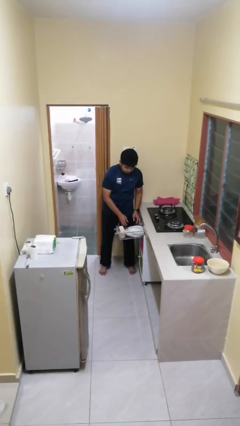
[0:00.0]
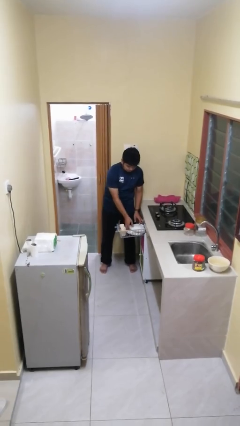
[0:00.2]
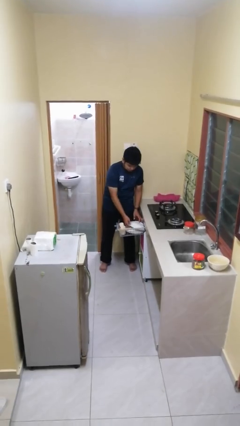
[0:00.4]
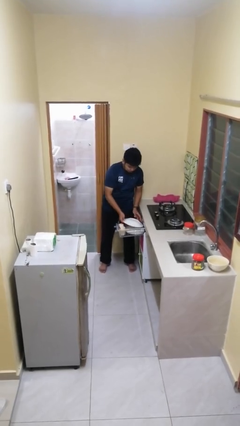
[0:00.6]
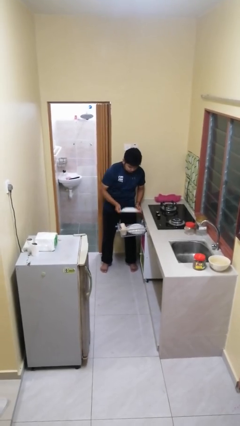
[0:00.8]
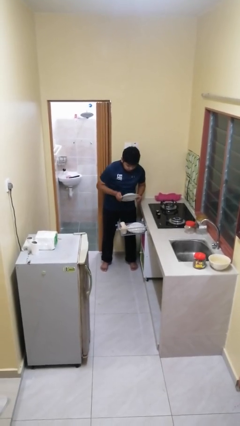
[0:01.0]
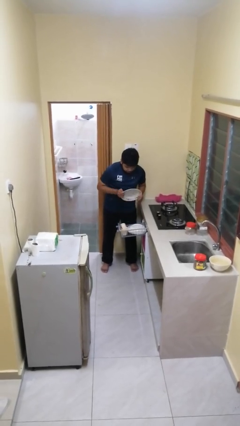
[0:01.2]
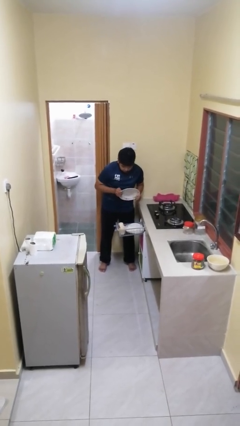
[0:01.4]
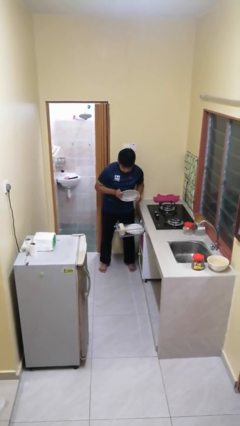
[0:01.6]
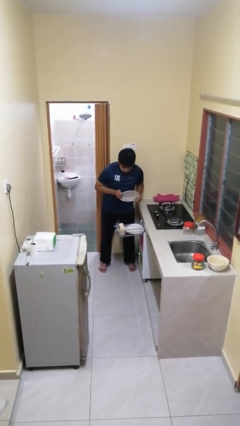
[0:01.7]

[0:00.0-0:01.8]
person takes object from kitchen drawer

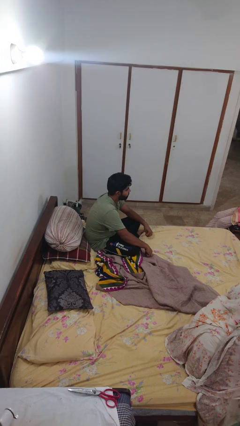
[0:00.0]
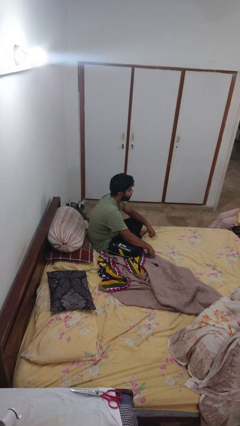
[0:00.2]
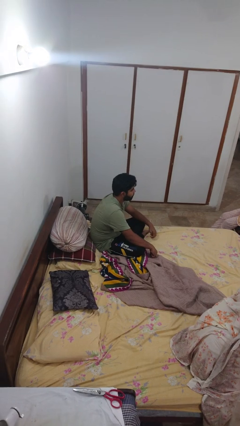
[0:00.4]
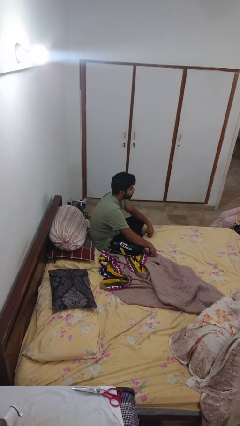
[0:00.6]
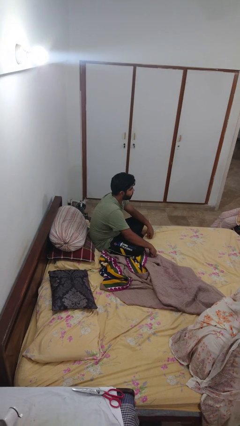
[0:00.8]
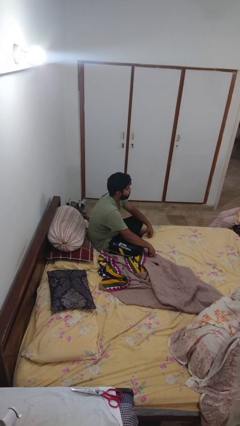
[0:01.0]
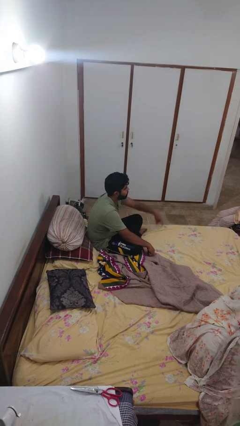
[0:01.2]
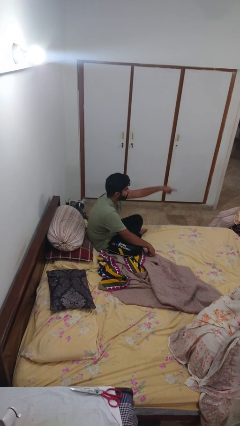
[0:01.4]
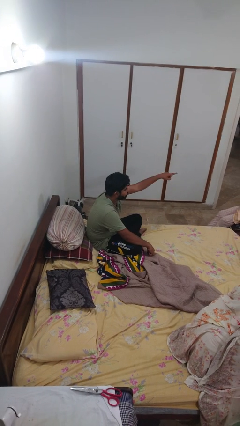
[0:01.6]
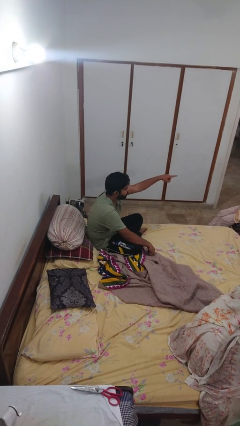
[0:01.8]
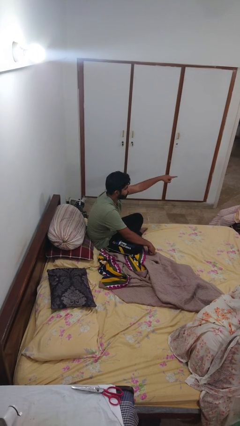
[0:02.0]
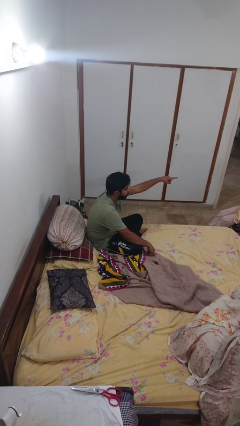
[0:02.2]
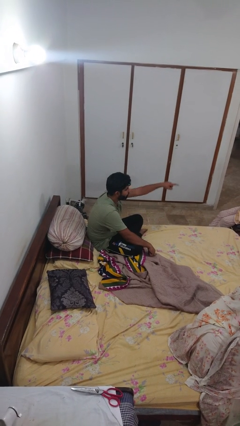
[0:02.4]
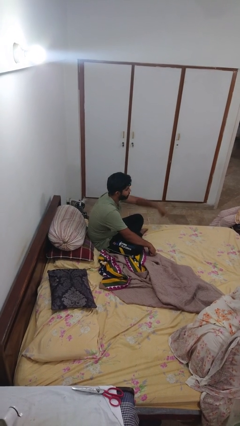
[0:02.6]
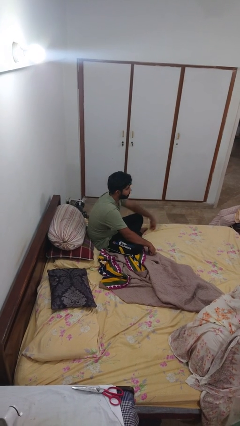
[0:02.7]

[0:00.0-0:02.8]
person points at person

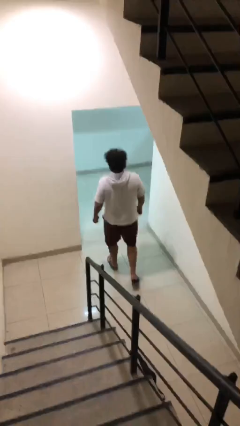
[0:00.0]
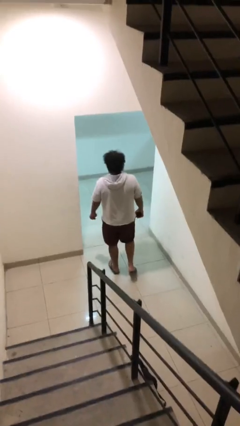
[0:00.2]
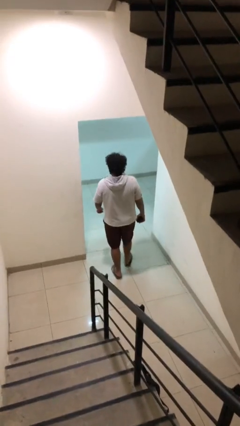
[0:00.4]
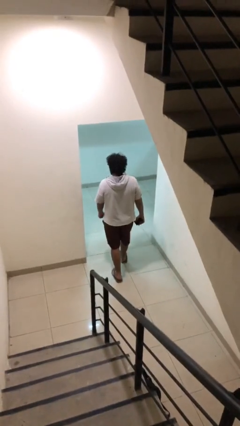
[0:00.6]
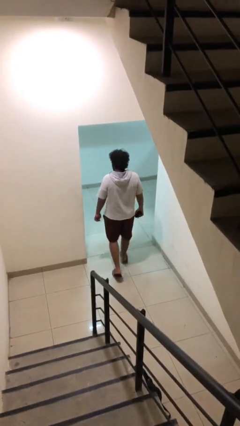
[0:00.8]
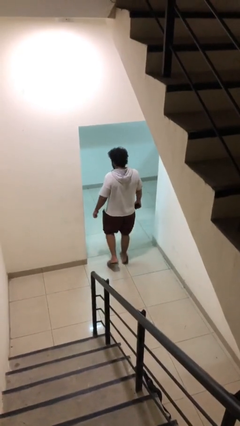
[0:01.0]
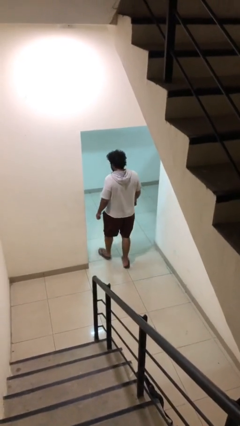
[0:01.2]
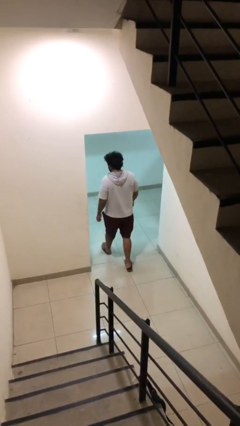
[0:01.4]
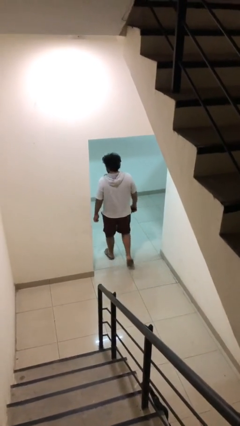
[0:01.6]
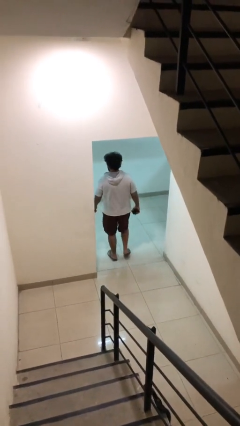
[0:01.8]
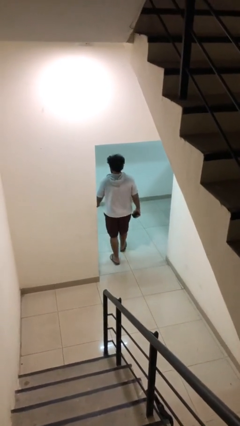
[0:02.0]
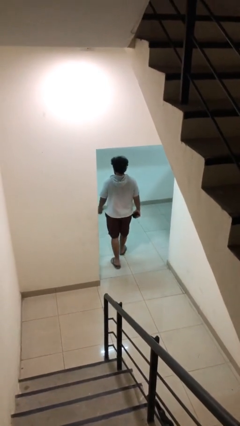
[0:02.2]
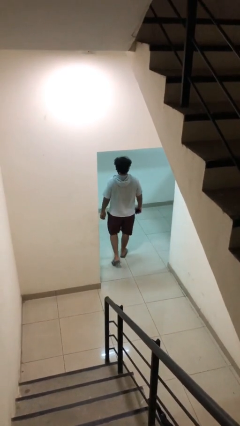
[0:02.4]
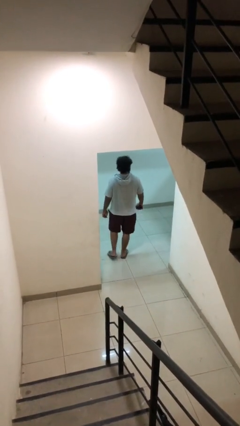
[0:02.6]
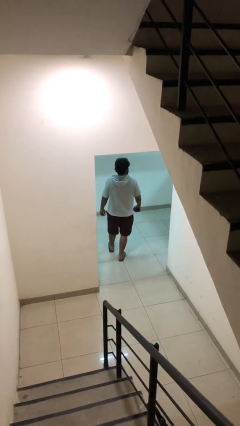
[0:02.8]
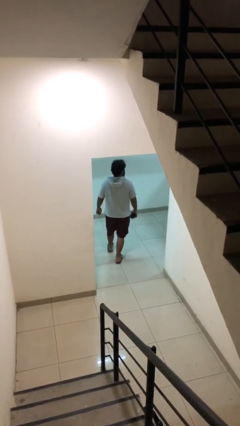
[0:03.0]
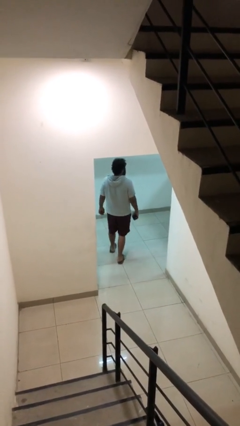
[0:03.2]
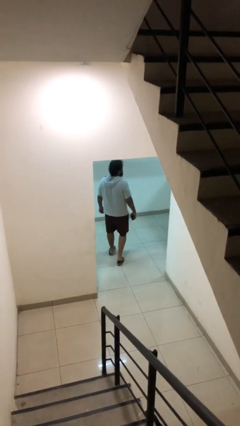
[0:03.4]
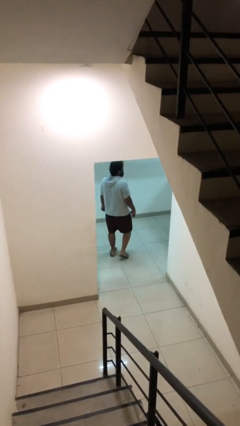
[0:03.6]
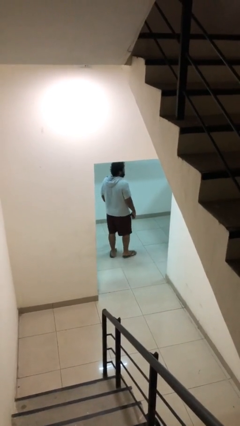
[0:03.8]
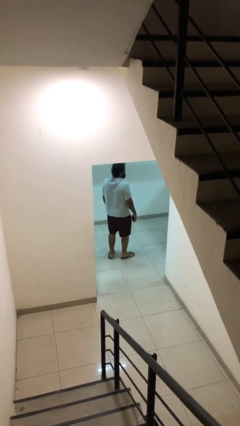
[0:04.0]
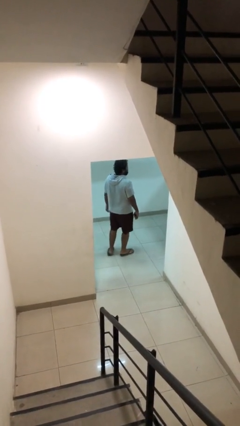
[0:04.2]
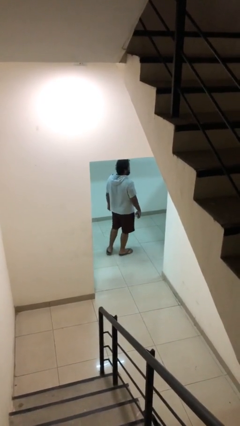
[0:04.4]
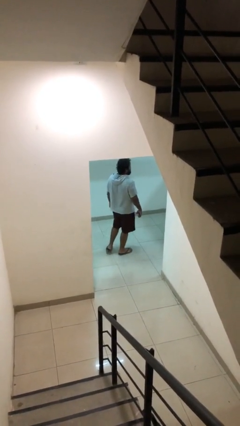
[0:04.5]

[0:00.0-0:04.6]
person exits scene through structure

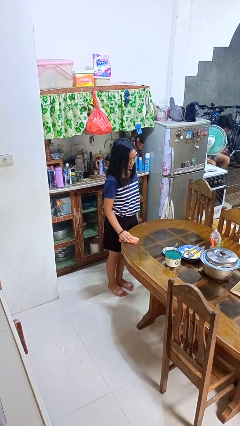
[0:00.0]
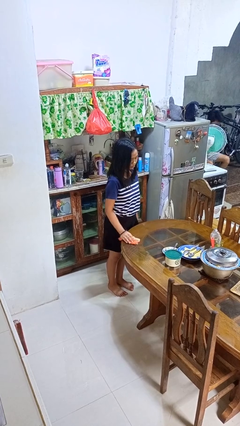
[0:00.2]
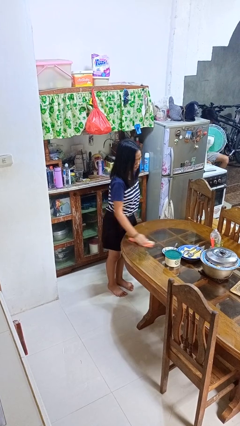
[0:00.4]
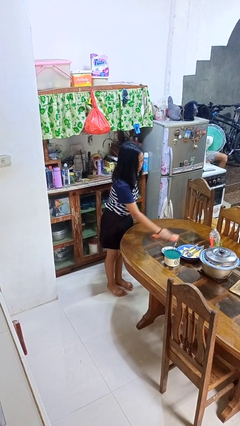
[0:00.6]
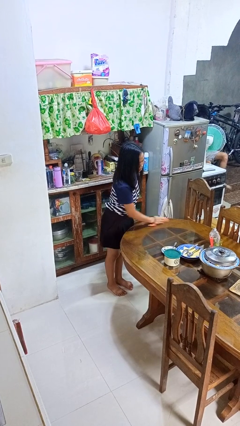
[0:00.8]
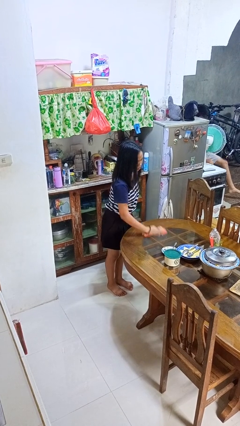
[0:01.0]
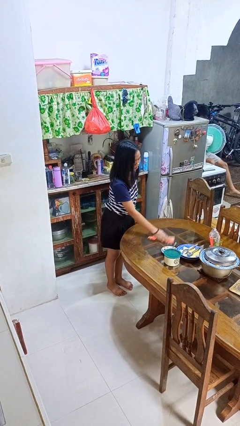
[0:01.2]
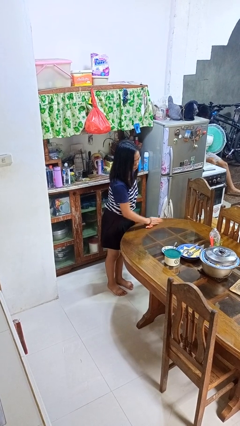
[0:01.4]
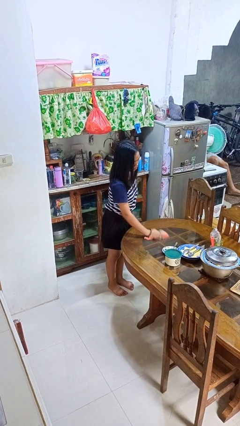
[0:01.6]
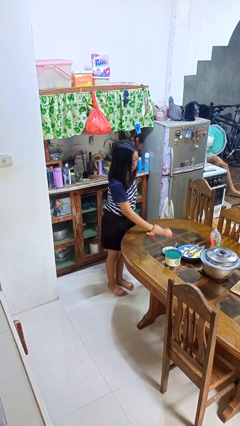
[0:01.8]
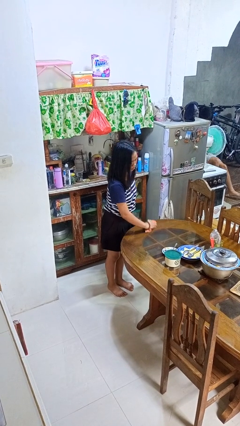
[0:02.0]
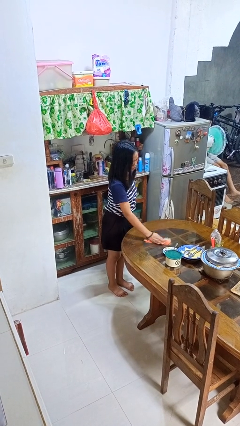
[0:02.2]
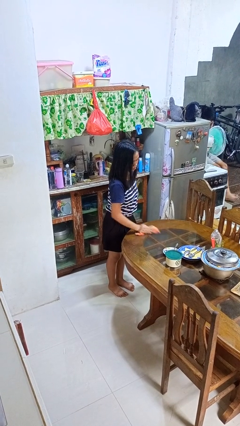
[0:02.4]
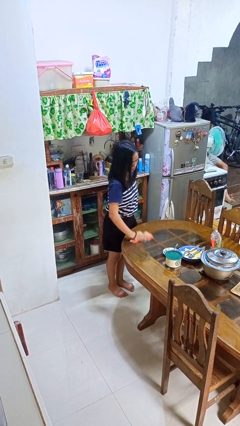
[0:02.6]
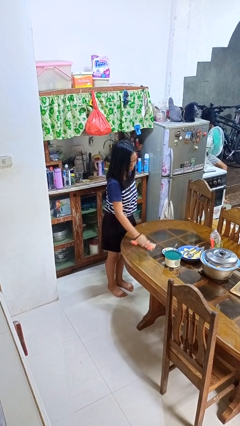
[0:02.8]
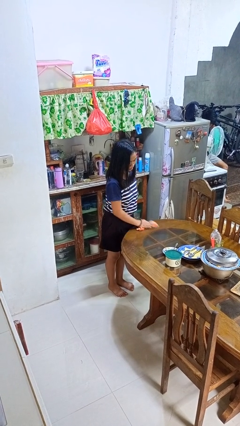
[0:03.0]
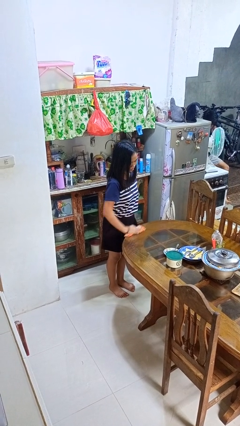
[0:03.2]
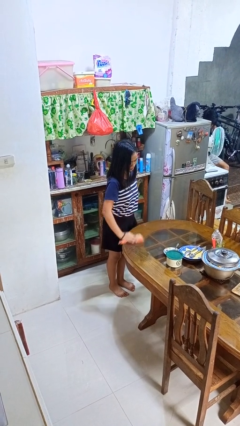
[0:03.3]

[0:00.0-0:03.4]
person cleans table with rag

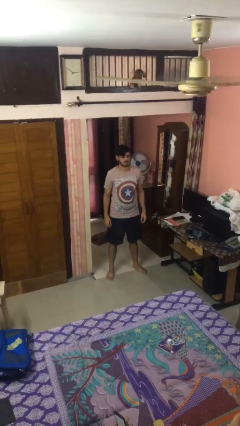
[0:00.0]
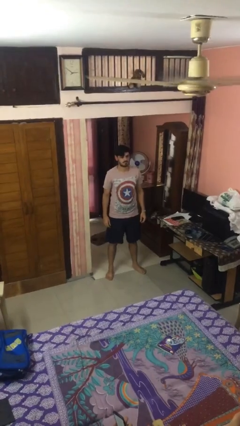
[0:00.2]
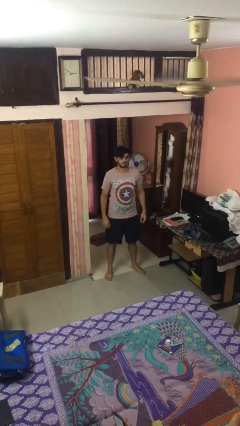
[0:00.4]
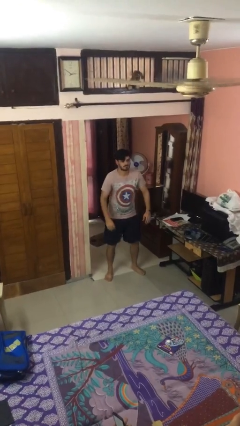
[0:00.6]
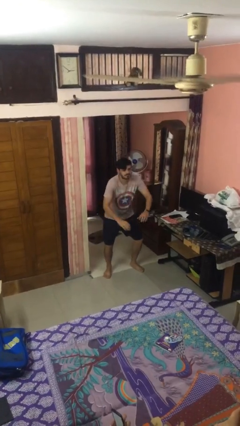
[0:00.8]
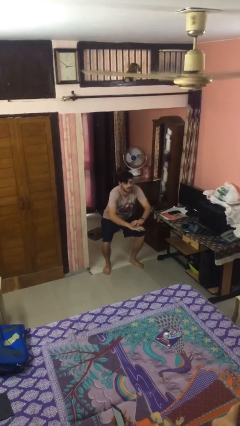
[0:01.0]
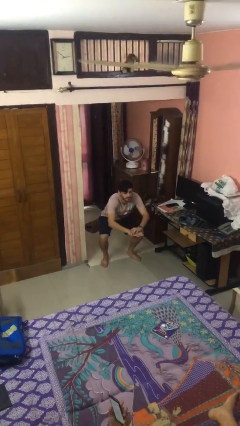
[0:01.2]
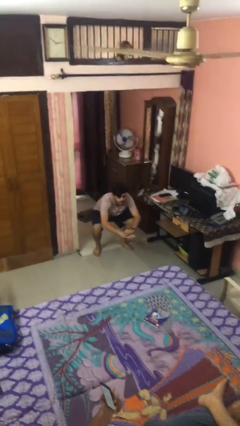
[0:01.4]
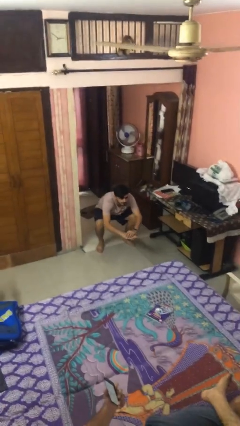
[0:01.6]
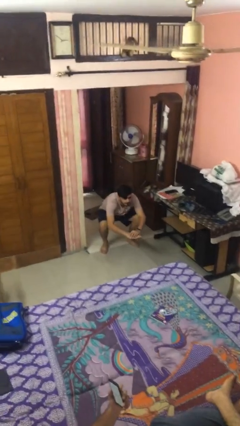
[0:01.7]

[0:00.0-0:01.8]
person squats

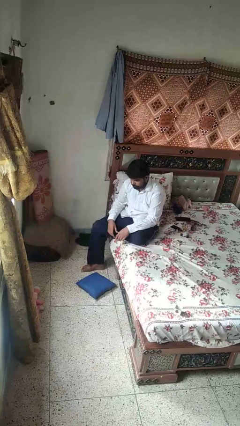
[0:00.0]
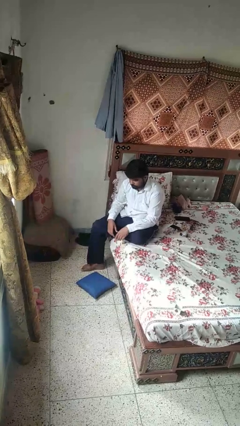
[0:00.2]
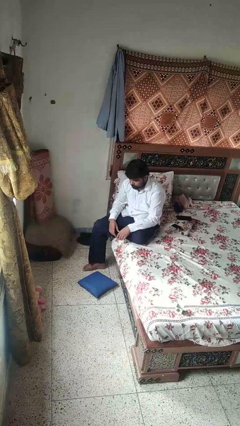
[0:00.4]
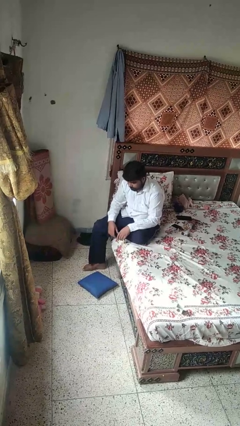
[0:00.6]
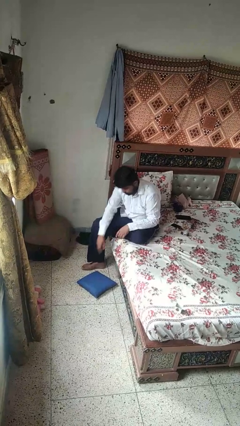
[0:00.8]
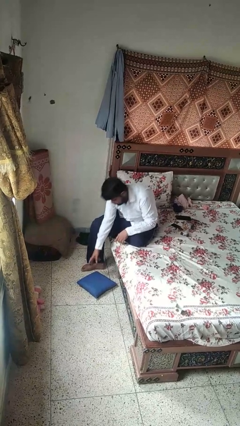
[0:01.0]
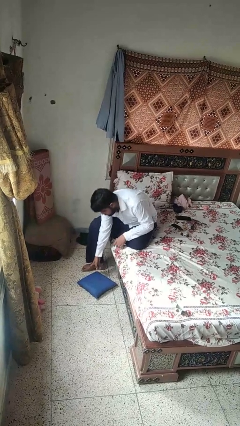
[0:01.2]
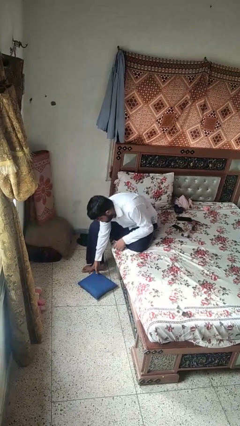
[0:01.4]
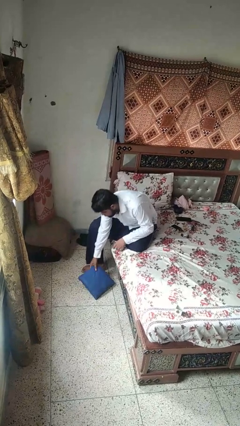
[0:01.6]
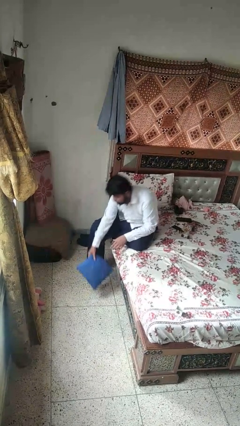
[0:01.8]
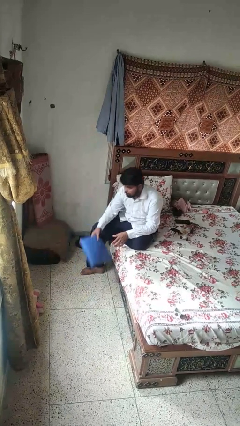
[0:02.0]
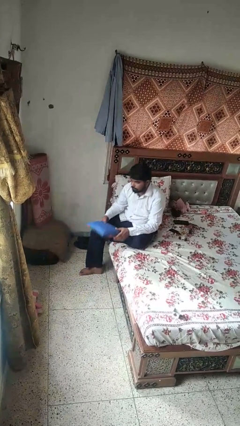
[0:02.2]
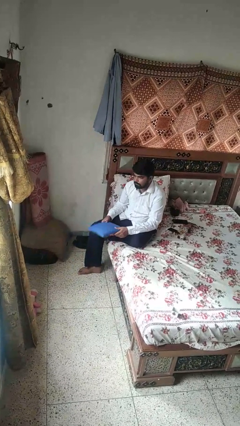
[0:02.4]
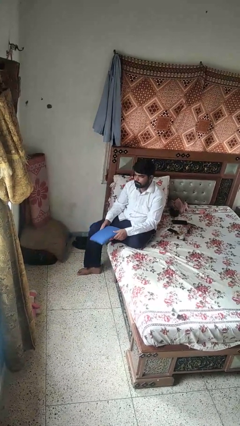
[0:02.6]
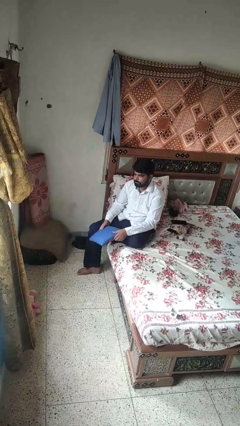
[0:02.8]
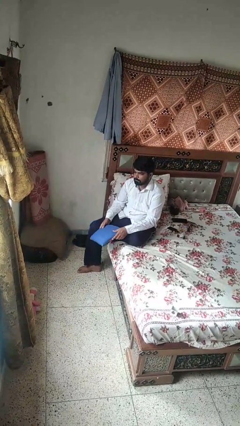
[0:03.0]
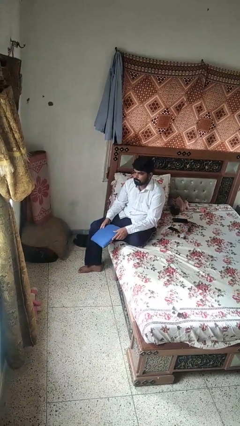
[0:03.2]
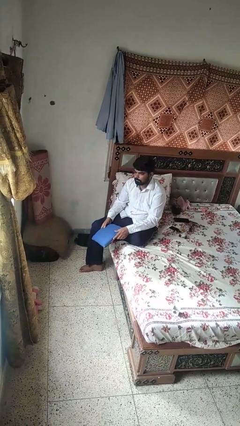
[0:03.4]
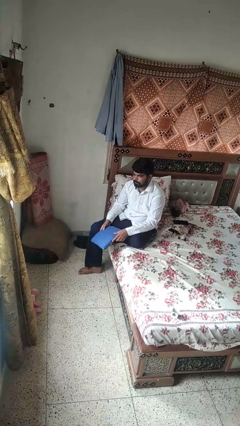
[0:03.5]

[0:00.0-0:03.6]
person picks up object from floor
